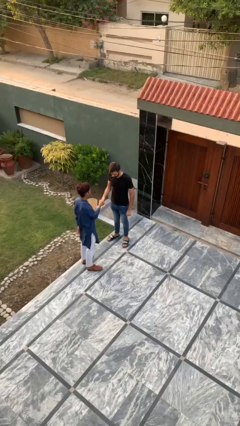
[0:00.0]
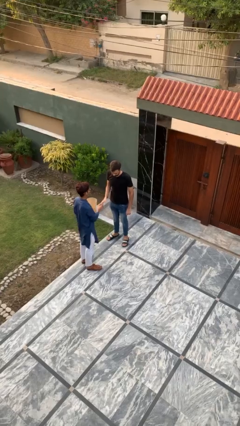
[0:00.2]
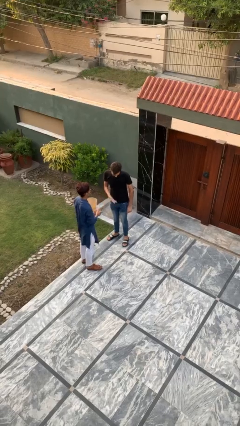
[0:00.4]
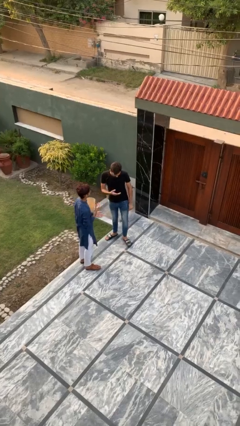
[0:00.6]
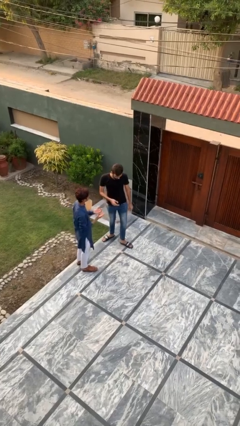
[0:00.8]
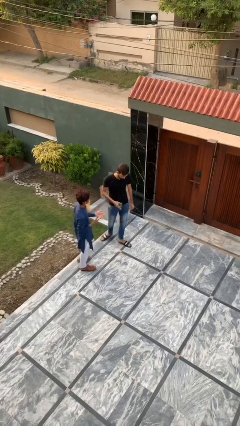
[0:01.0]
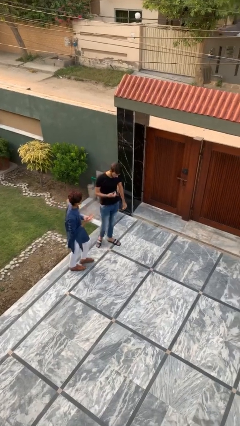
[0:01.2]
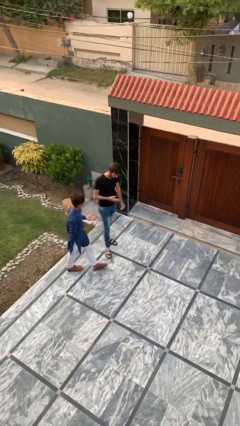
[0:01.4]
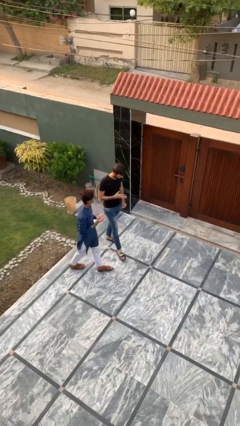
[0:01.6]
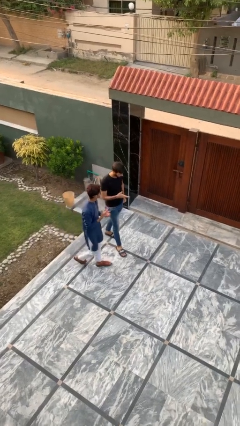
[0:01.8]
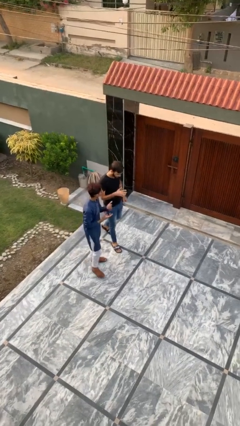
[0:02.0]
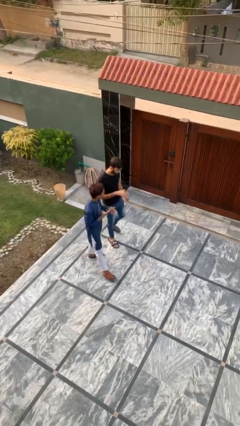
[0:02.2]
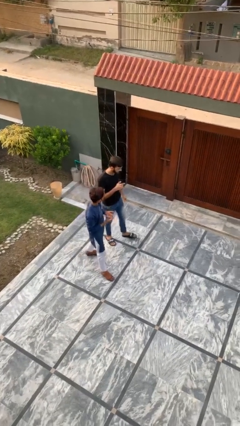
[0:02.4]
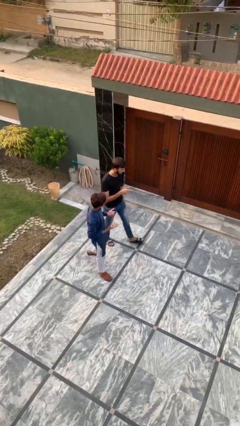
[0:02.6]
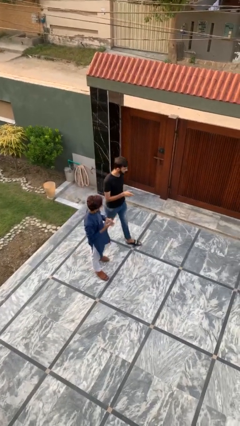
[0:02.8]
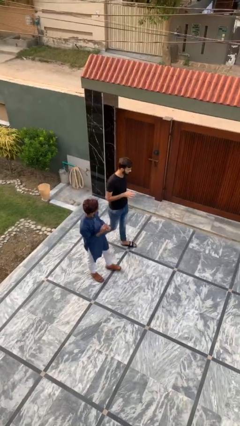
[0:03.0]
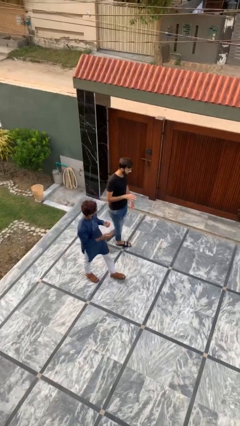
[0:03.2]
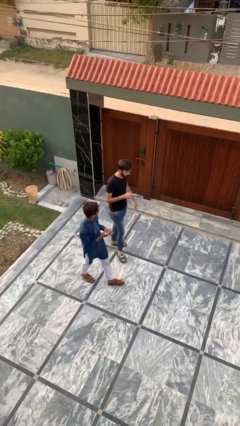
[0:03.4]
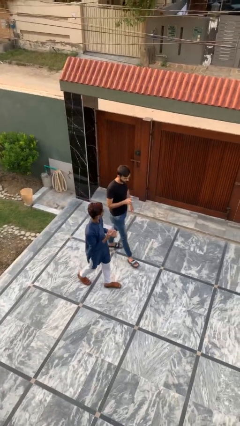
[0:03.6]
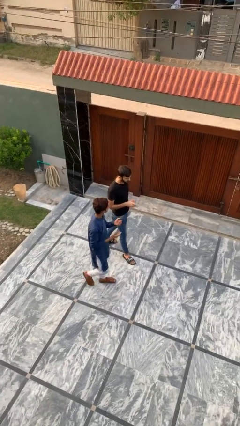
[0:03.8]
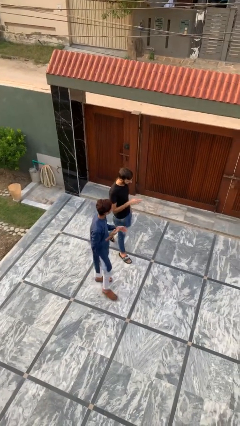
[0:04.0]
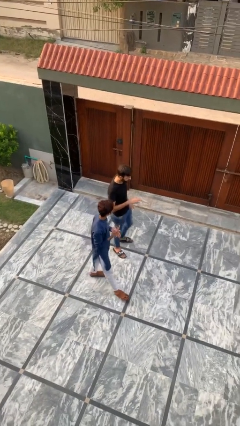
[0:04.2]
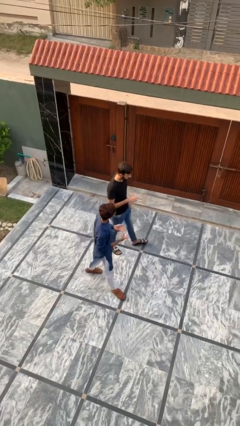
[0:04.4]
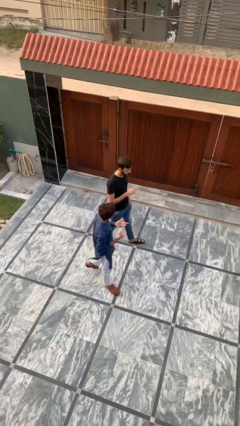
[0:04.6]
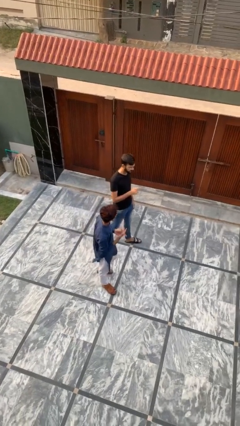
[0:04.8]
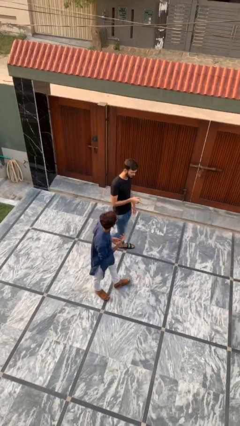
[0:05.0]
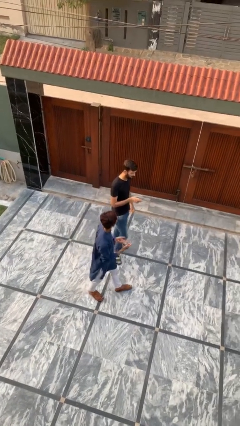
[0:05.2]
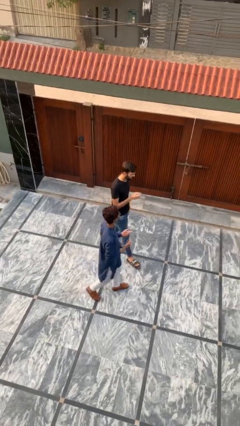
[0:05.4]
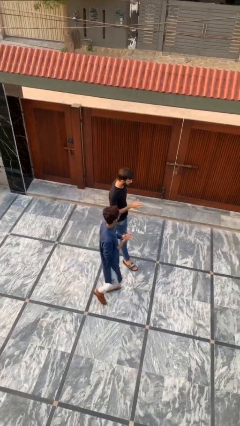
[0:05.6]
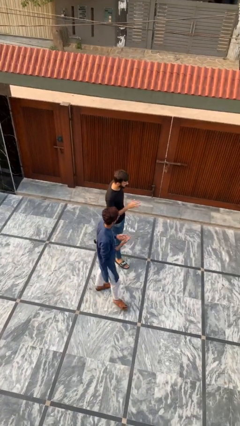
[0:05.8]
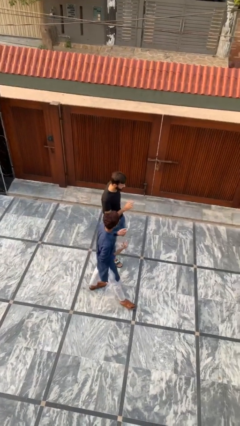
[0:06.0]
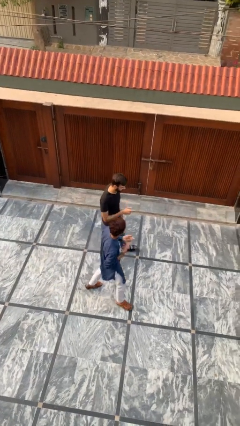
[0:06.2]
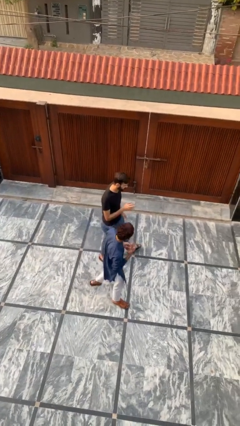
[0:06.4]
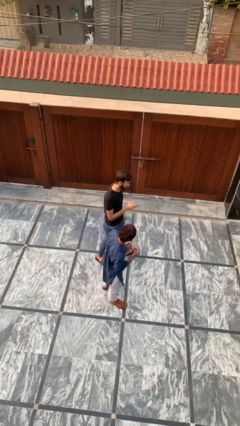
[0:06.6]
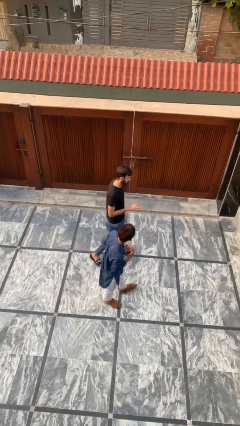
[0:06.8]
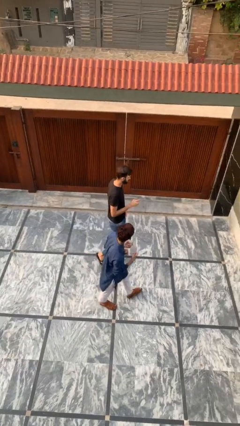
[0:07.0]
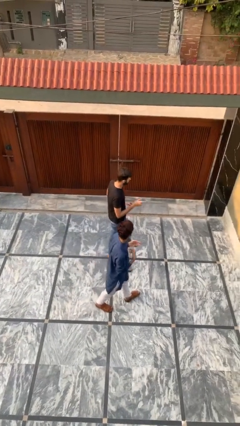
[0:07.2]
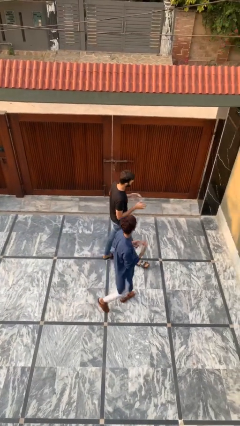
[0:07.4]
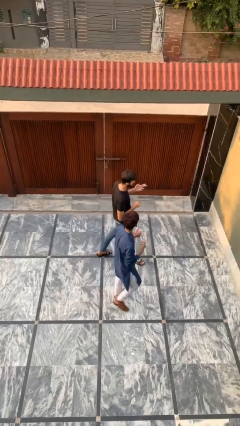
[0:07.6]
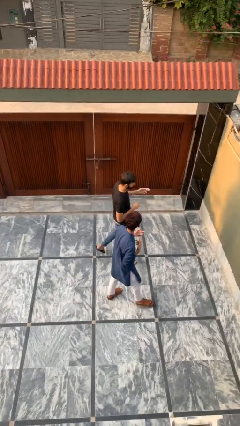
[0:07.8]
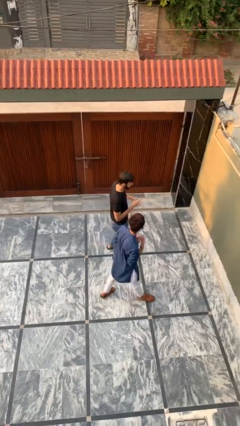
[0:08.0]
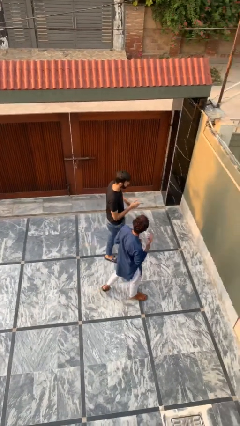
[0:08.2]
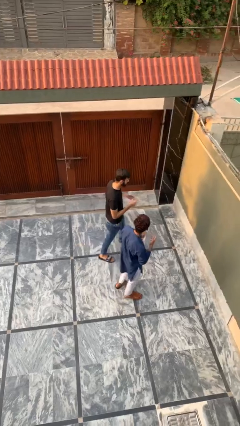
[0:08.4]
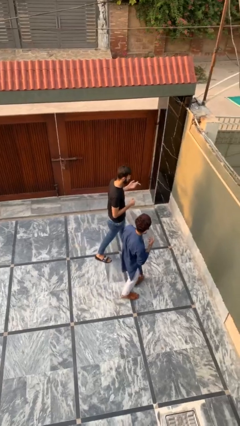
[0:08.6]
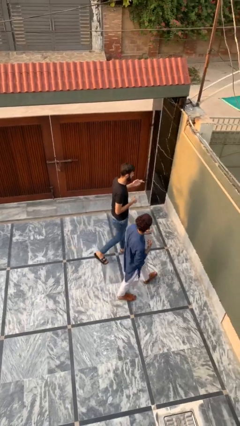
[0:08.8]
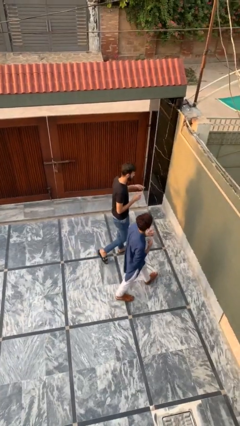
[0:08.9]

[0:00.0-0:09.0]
person talks to person

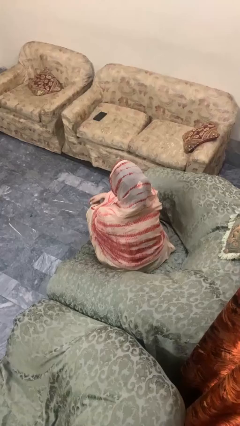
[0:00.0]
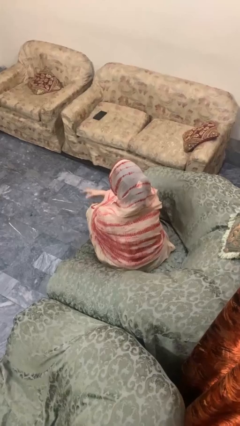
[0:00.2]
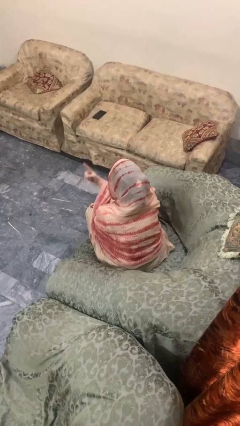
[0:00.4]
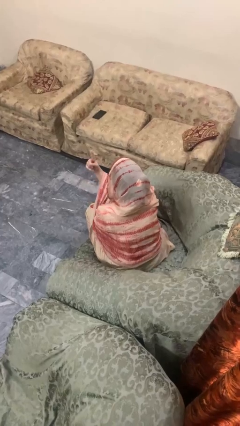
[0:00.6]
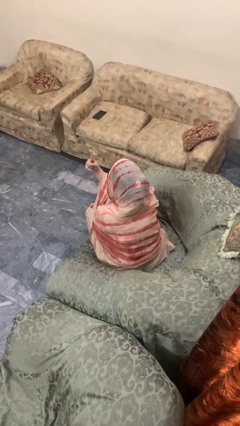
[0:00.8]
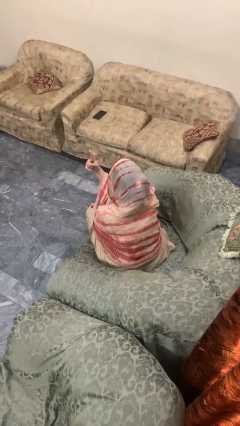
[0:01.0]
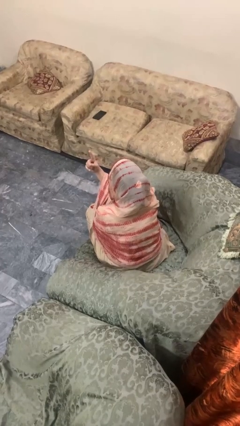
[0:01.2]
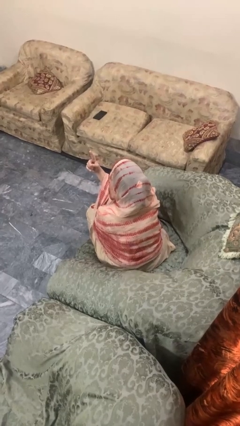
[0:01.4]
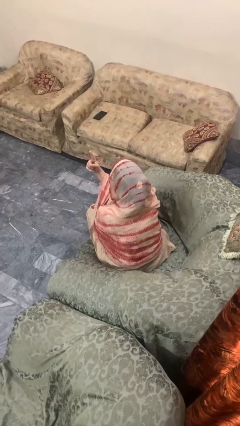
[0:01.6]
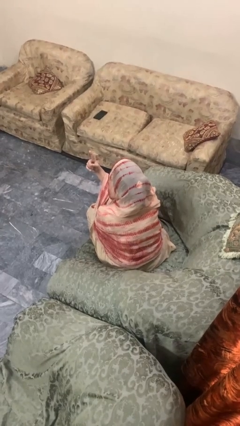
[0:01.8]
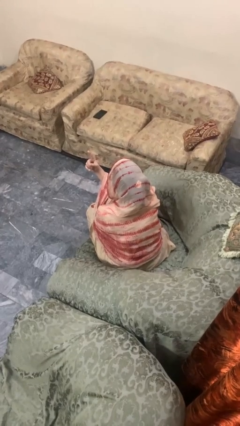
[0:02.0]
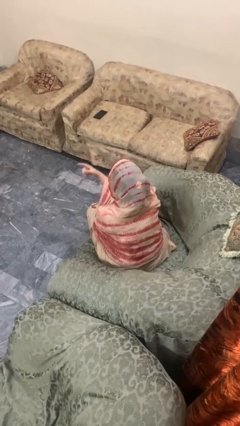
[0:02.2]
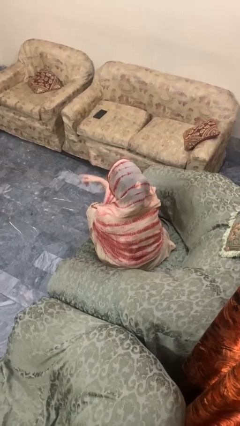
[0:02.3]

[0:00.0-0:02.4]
person gestures number one

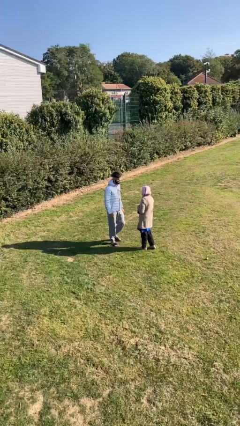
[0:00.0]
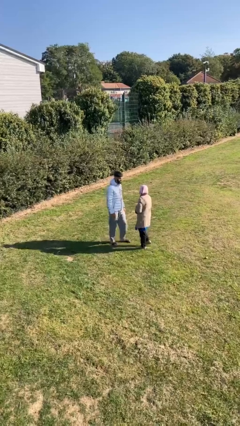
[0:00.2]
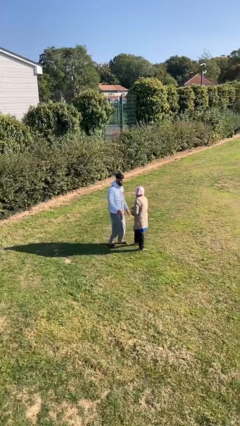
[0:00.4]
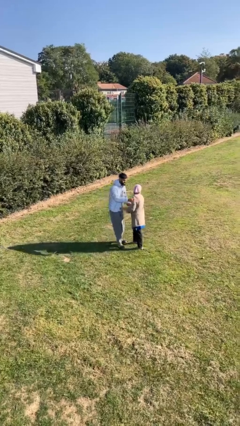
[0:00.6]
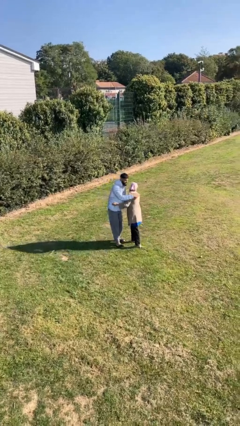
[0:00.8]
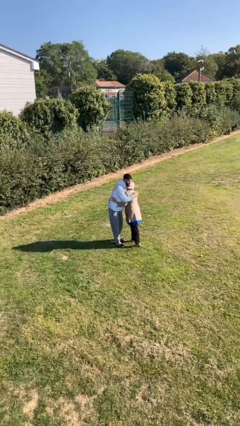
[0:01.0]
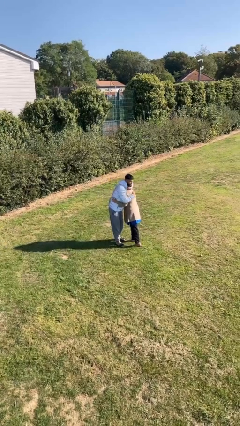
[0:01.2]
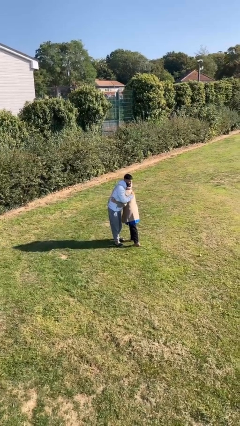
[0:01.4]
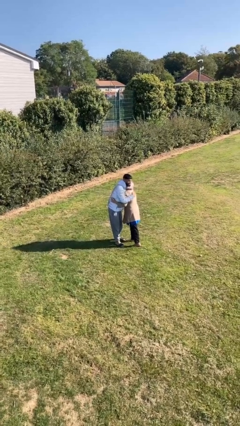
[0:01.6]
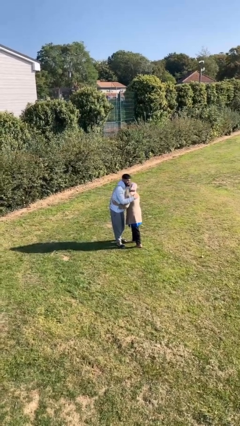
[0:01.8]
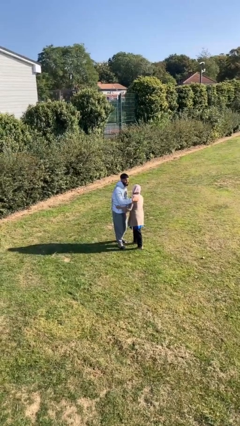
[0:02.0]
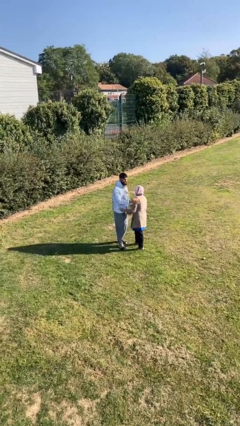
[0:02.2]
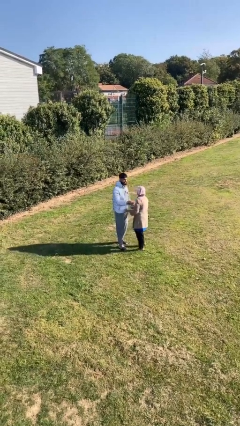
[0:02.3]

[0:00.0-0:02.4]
person embraces person

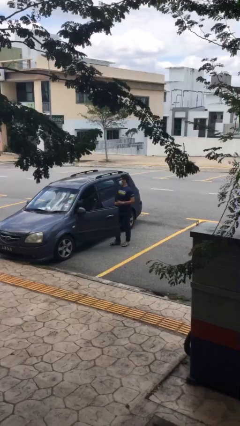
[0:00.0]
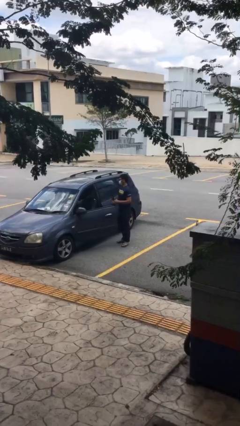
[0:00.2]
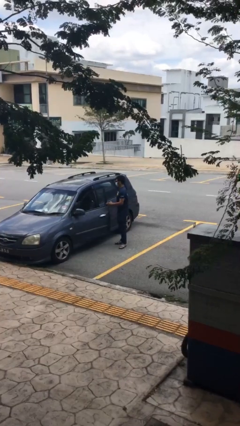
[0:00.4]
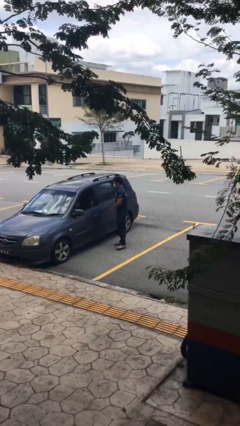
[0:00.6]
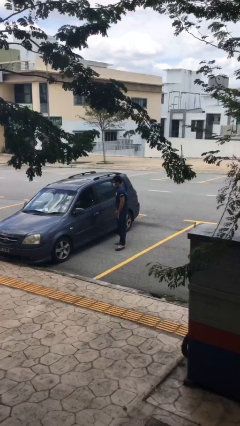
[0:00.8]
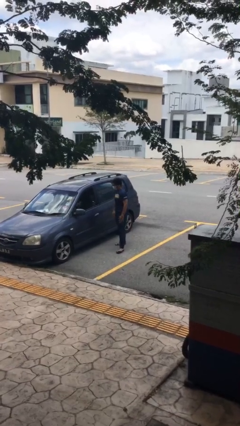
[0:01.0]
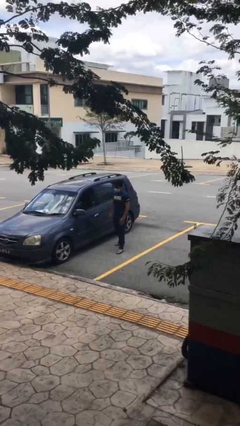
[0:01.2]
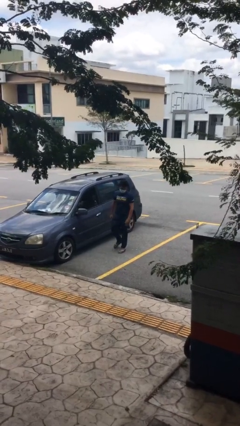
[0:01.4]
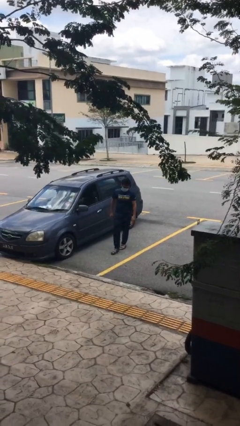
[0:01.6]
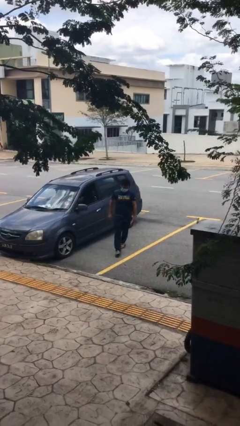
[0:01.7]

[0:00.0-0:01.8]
person closes car door

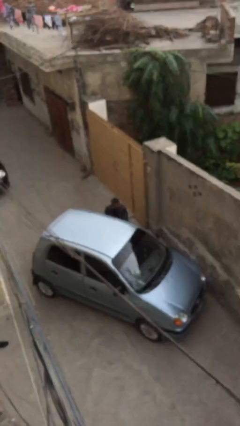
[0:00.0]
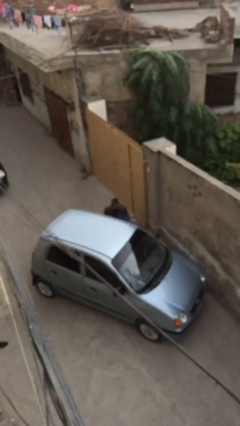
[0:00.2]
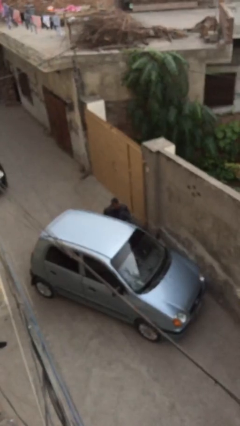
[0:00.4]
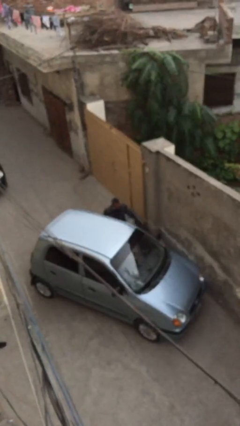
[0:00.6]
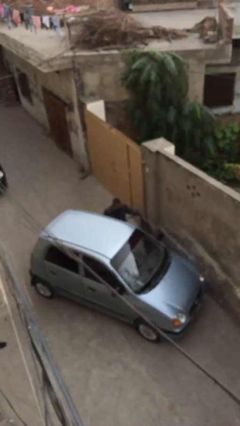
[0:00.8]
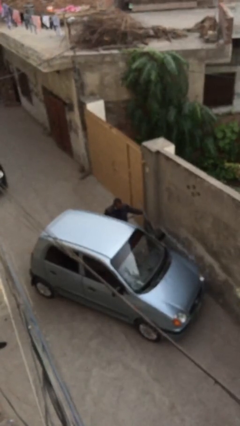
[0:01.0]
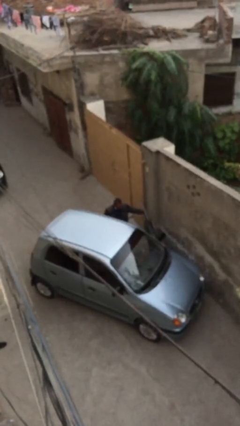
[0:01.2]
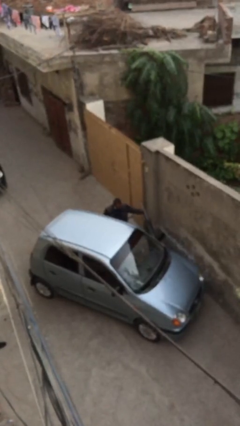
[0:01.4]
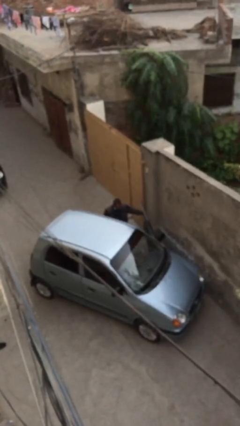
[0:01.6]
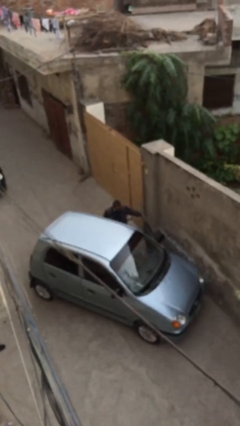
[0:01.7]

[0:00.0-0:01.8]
person opens car door

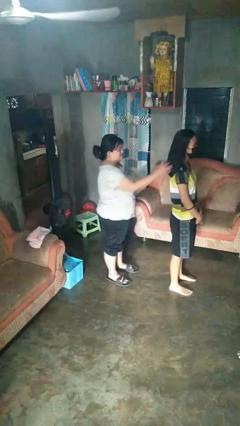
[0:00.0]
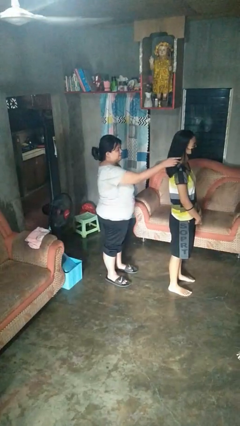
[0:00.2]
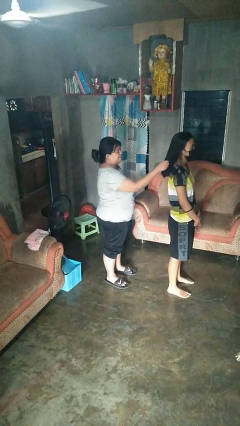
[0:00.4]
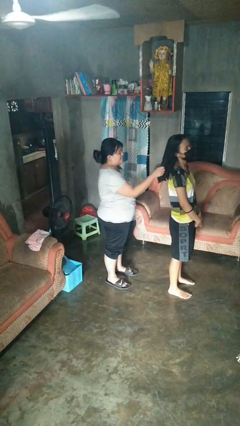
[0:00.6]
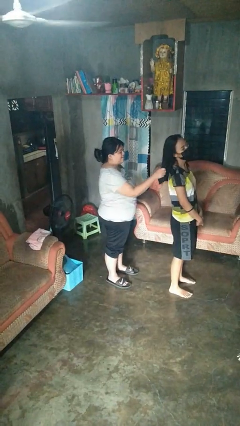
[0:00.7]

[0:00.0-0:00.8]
person grabs person by hair
